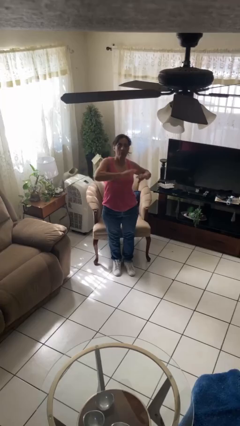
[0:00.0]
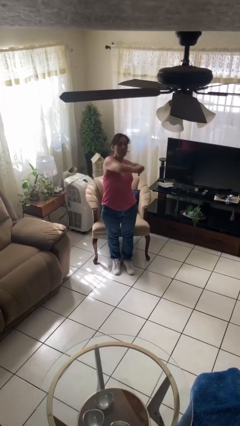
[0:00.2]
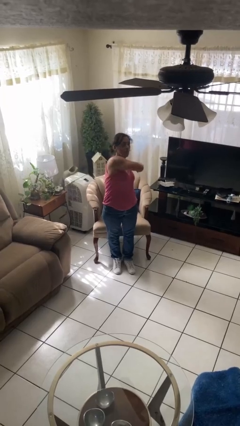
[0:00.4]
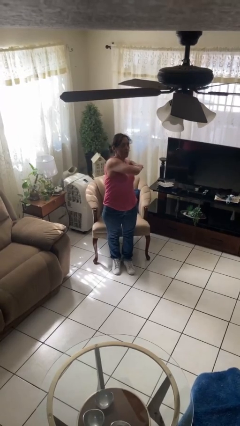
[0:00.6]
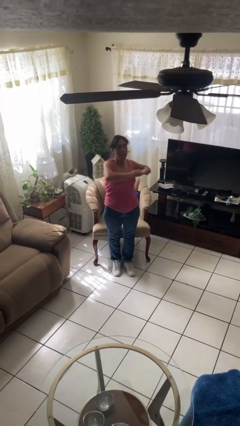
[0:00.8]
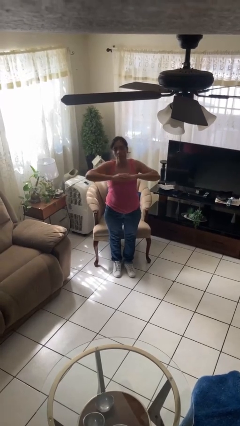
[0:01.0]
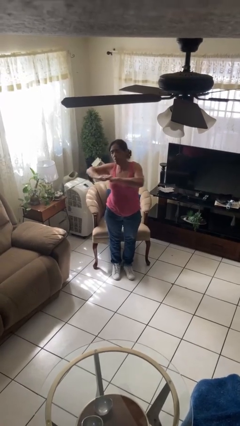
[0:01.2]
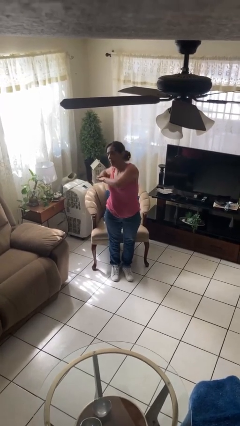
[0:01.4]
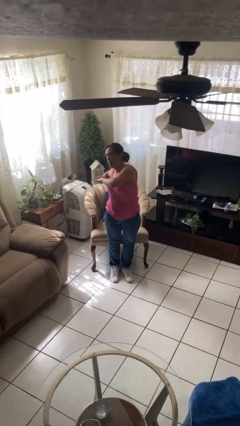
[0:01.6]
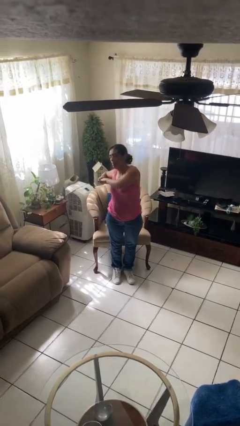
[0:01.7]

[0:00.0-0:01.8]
person stretches arms to side

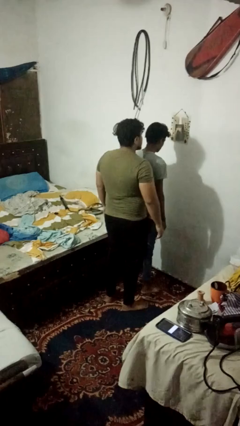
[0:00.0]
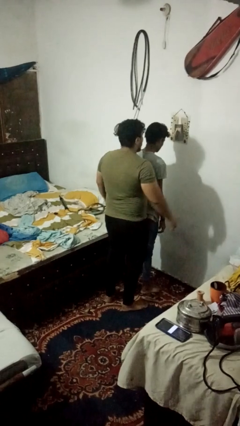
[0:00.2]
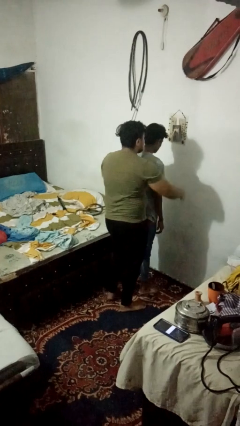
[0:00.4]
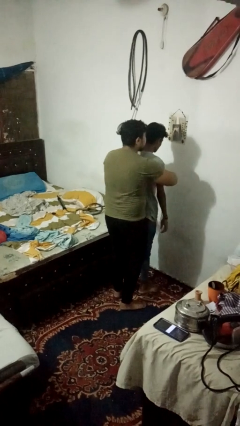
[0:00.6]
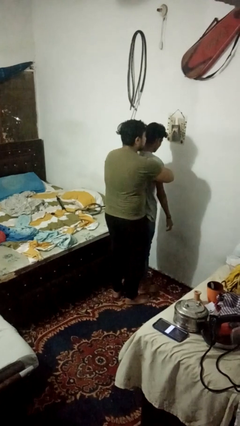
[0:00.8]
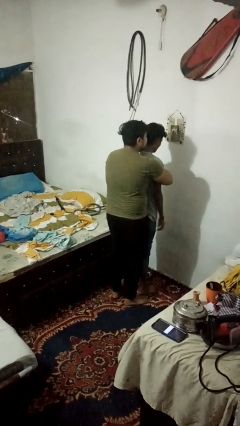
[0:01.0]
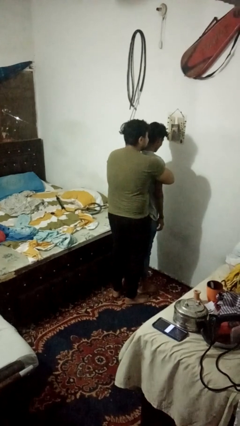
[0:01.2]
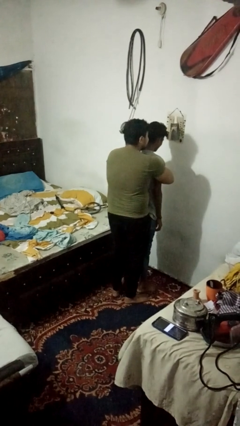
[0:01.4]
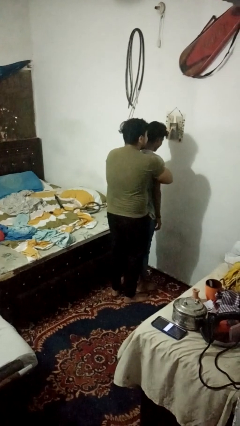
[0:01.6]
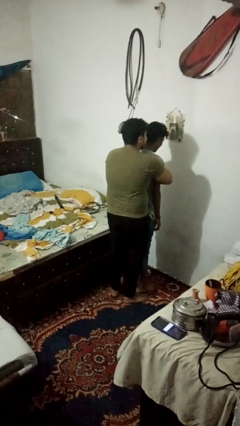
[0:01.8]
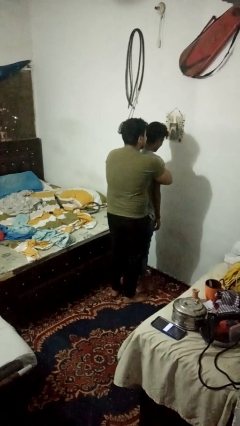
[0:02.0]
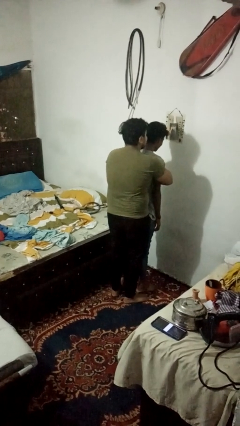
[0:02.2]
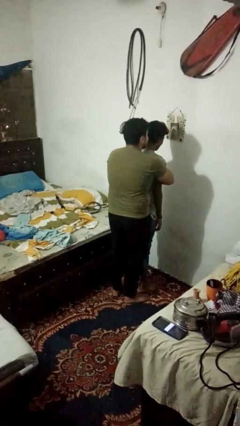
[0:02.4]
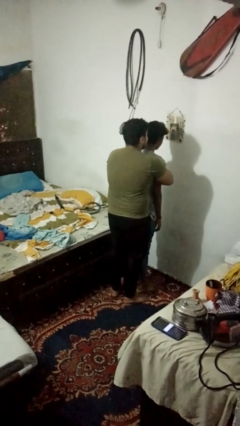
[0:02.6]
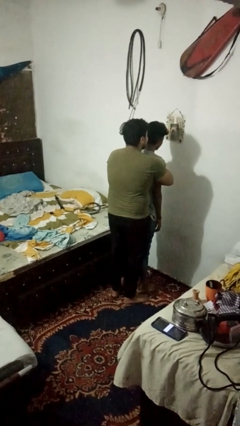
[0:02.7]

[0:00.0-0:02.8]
person hugs person from behind

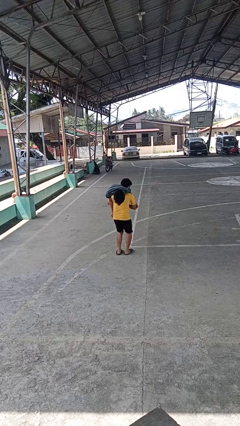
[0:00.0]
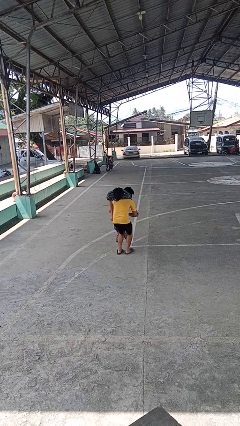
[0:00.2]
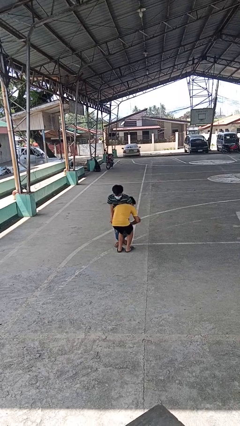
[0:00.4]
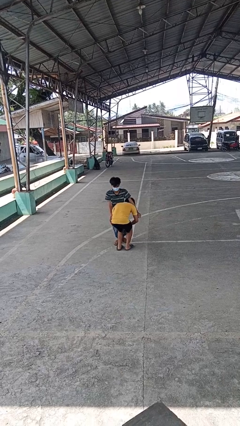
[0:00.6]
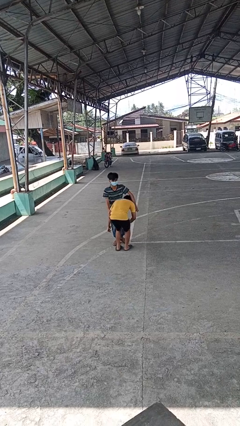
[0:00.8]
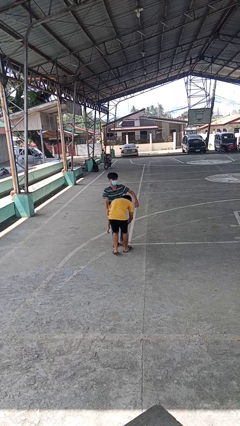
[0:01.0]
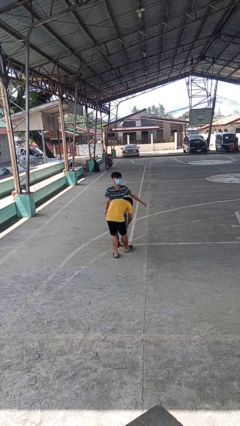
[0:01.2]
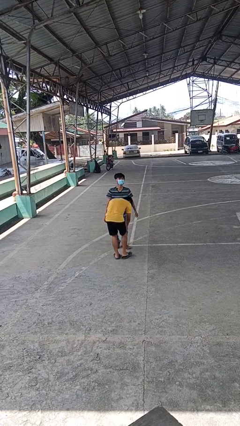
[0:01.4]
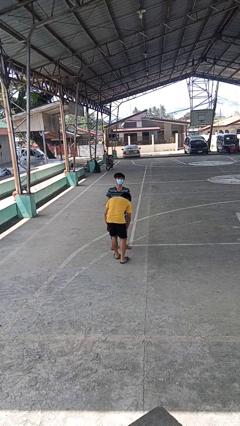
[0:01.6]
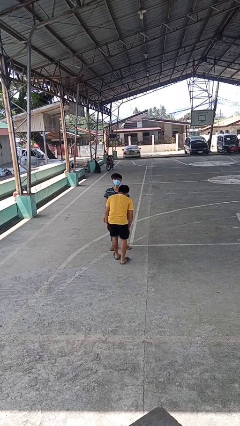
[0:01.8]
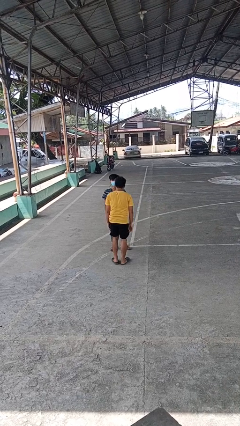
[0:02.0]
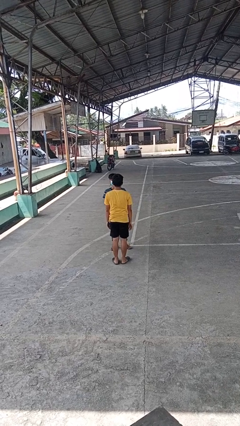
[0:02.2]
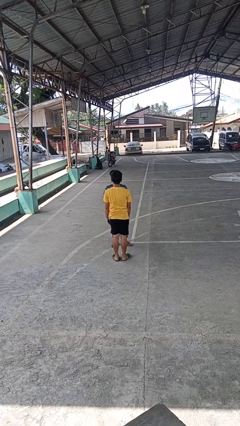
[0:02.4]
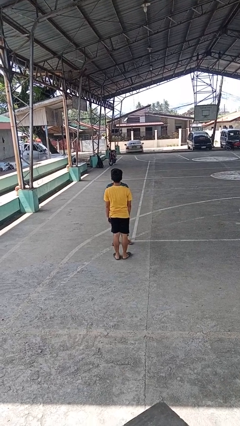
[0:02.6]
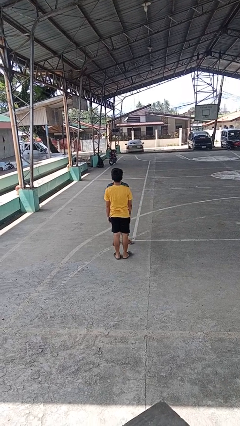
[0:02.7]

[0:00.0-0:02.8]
person puts down person

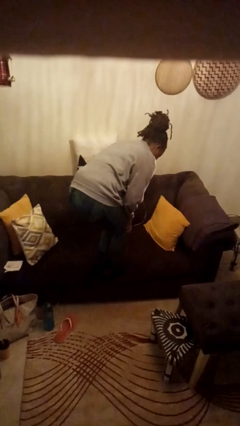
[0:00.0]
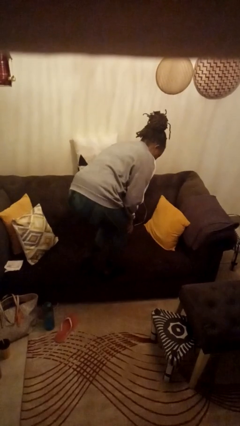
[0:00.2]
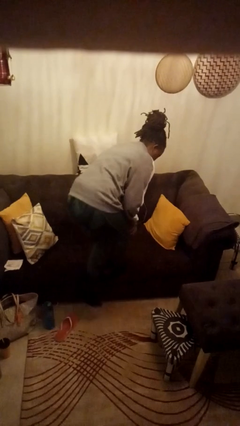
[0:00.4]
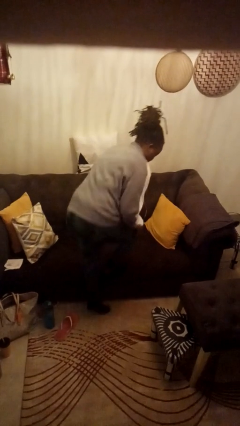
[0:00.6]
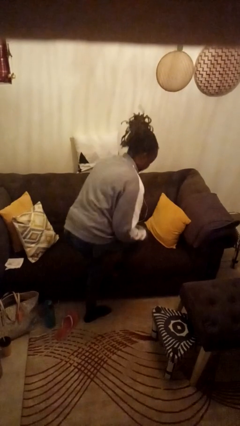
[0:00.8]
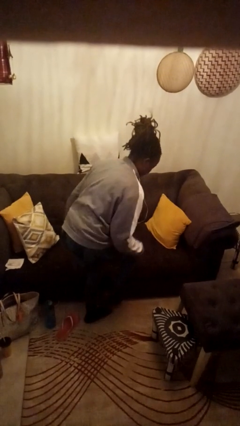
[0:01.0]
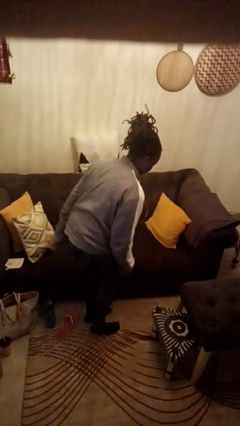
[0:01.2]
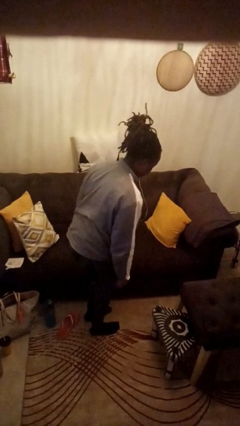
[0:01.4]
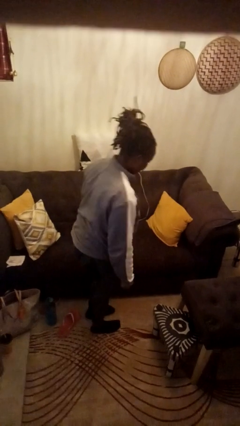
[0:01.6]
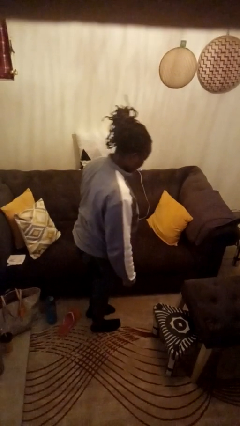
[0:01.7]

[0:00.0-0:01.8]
person climbs off chair

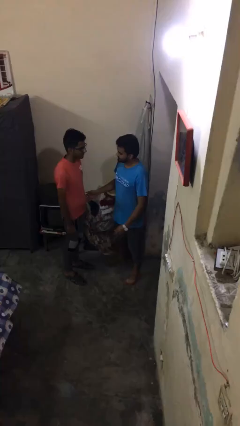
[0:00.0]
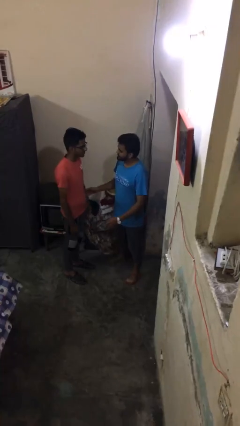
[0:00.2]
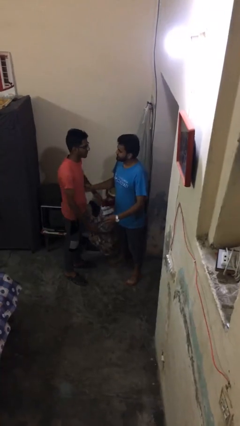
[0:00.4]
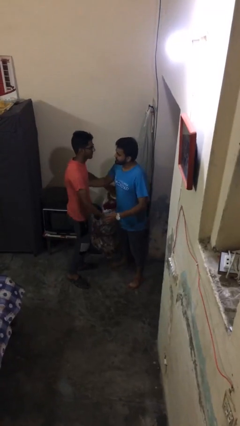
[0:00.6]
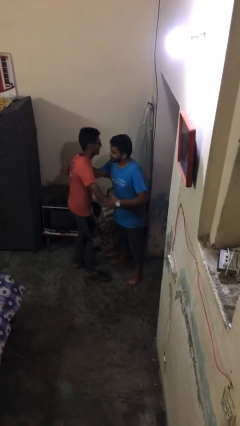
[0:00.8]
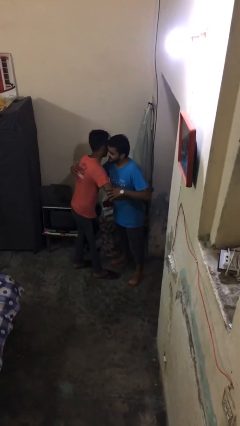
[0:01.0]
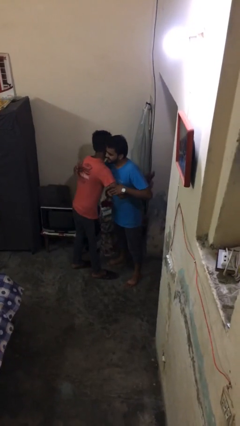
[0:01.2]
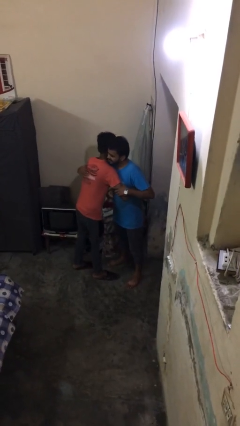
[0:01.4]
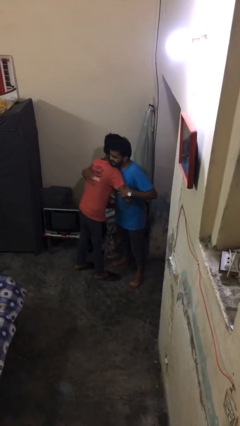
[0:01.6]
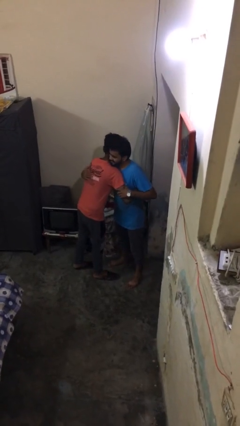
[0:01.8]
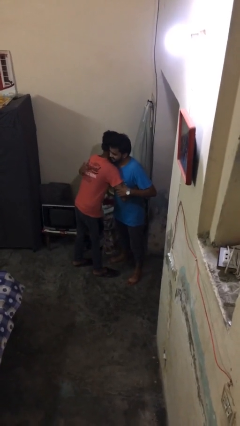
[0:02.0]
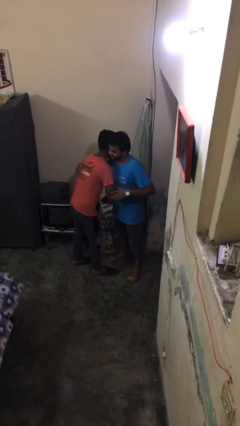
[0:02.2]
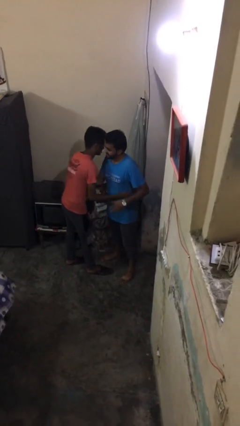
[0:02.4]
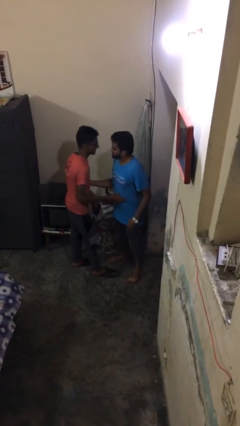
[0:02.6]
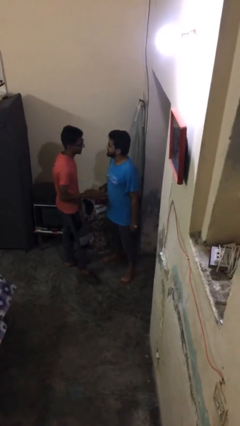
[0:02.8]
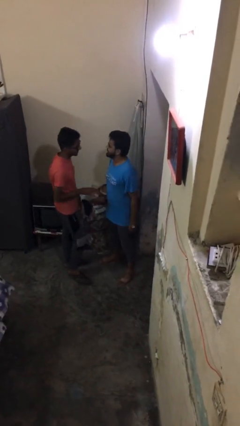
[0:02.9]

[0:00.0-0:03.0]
person embraces person

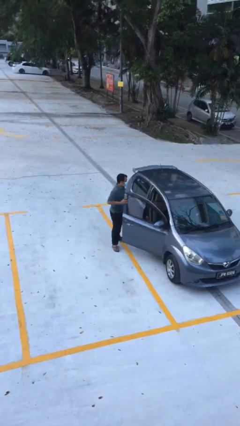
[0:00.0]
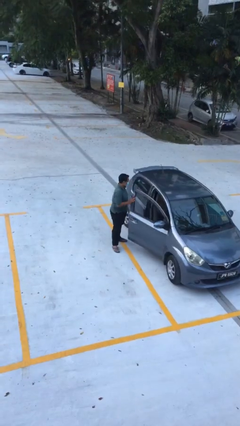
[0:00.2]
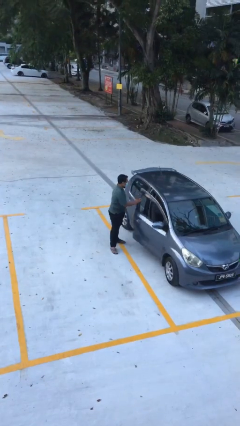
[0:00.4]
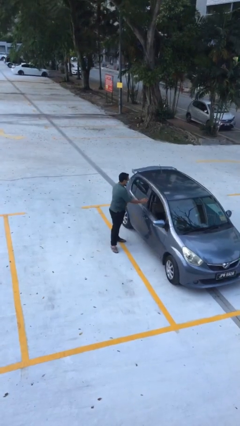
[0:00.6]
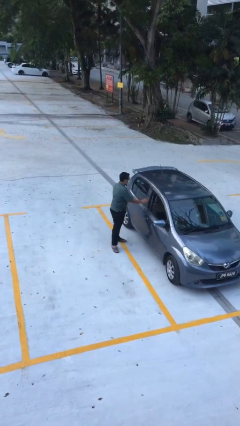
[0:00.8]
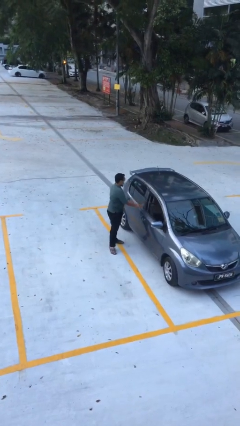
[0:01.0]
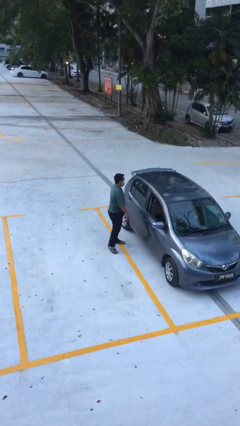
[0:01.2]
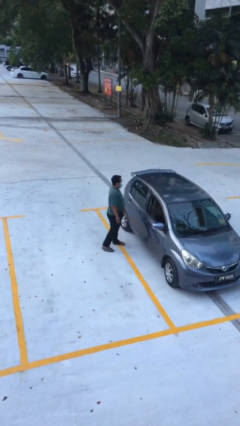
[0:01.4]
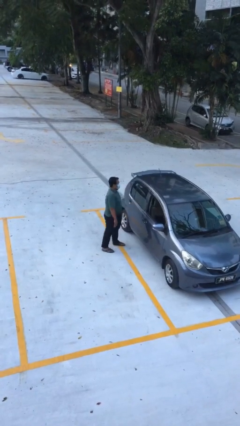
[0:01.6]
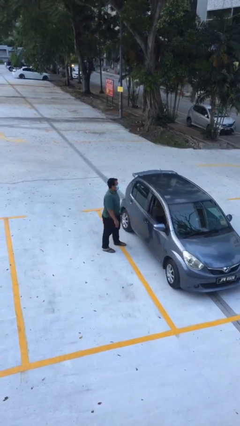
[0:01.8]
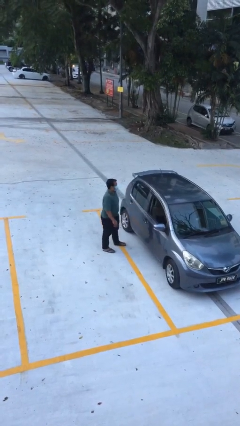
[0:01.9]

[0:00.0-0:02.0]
person closes car door

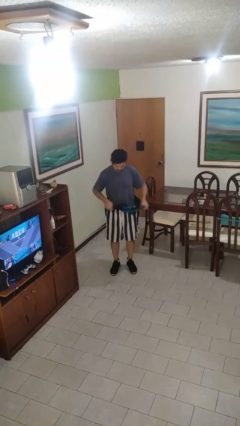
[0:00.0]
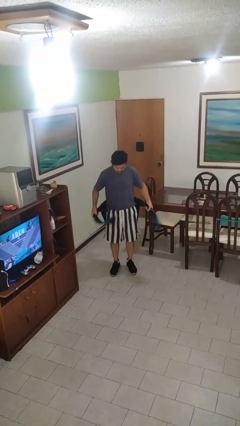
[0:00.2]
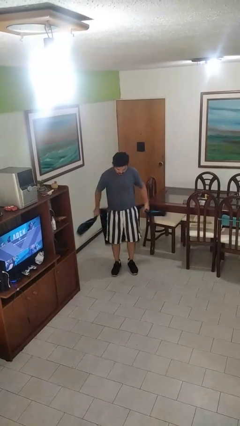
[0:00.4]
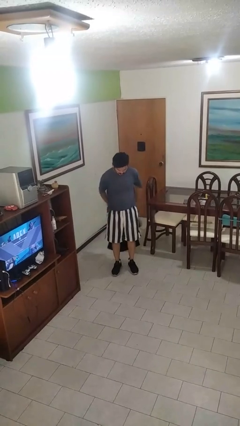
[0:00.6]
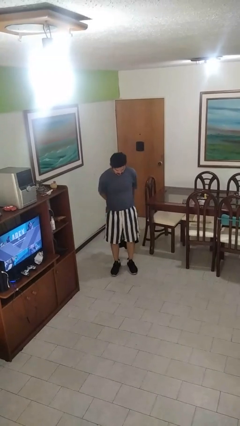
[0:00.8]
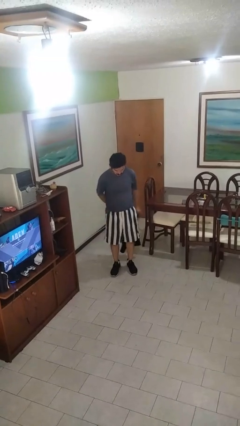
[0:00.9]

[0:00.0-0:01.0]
person unties jacket around waist

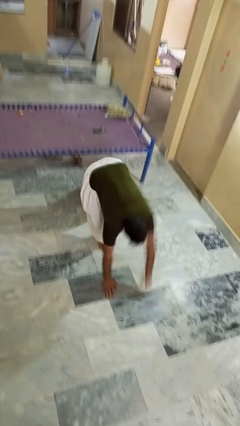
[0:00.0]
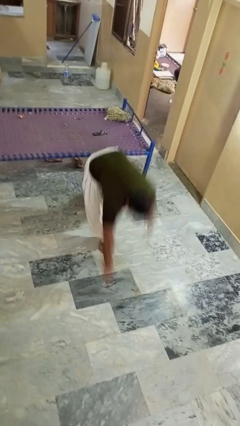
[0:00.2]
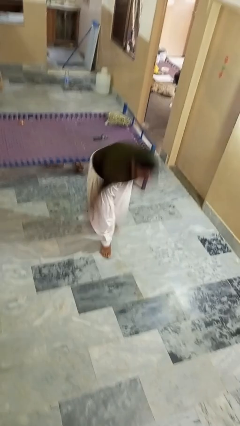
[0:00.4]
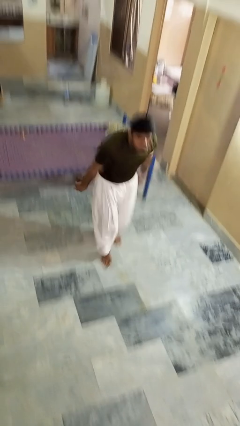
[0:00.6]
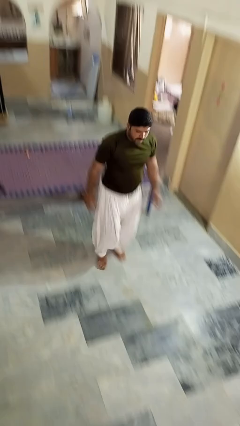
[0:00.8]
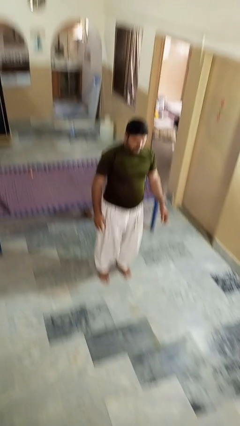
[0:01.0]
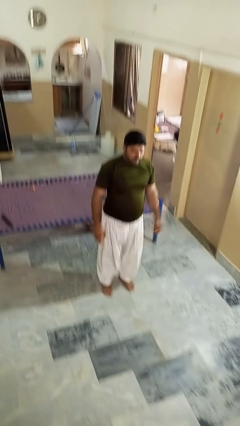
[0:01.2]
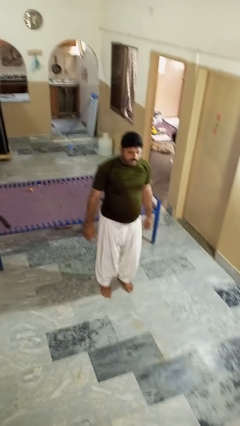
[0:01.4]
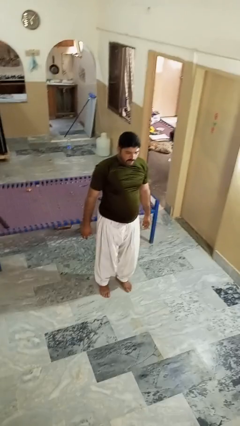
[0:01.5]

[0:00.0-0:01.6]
person stands up from floor
